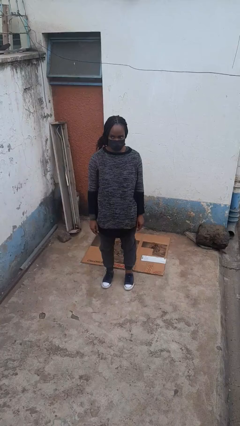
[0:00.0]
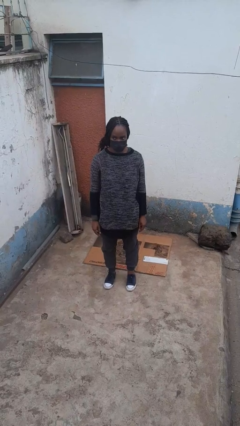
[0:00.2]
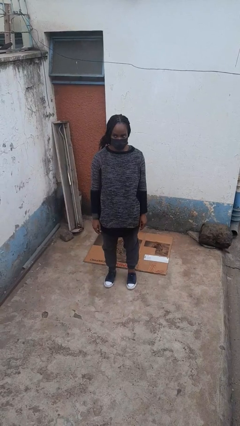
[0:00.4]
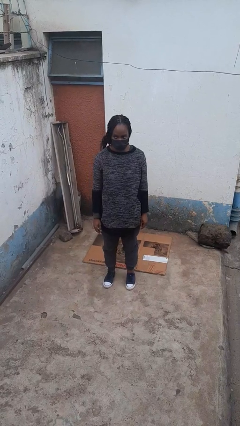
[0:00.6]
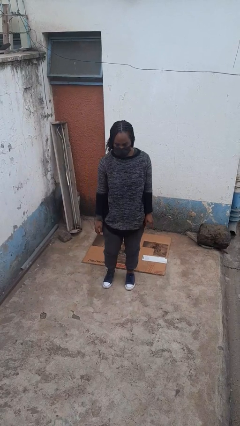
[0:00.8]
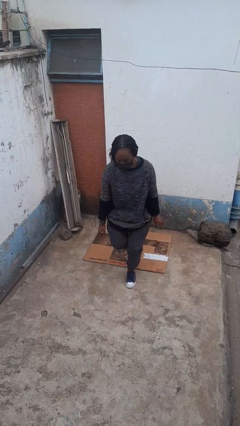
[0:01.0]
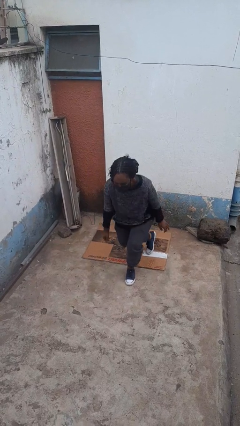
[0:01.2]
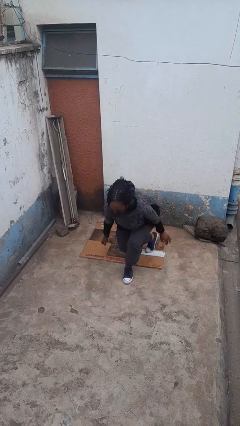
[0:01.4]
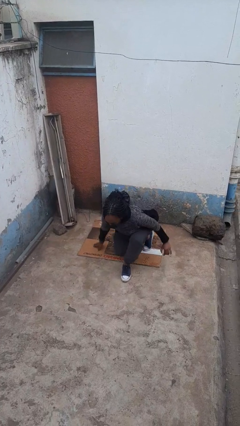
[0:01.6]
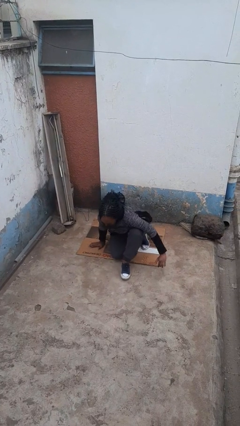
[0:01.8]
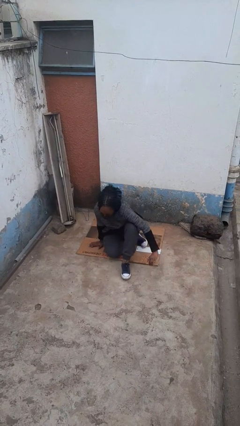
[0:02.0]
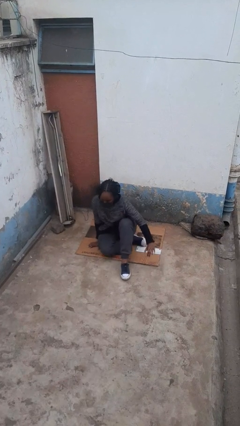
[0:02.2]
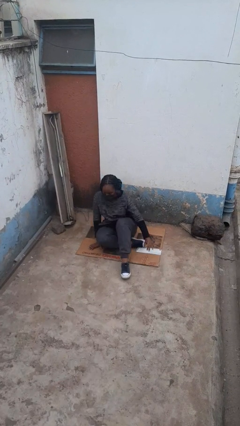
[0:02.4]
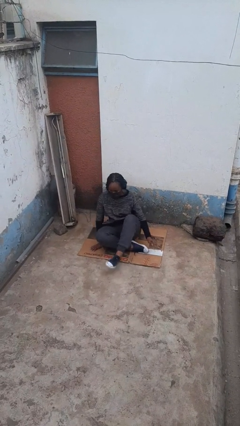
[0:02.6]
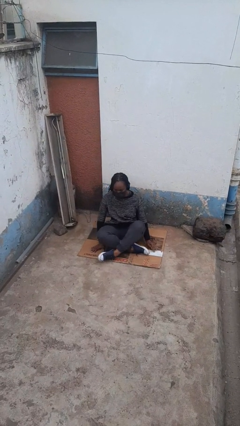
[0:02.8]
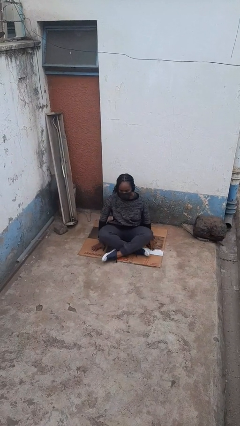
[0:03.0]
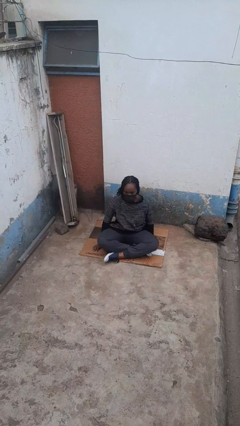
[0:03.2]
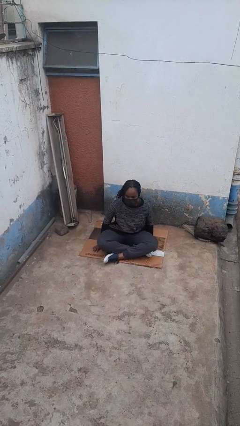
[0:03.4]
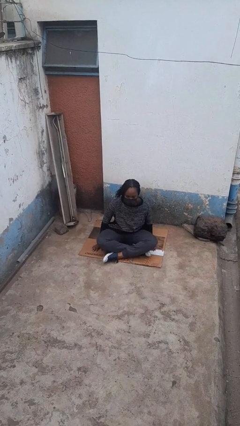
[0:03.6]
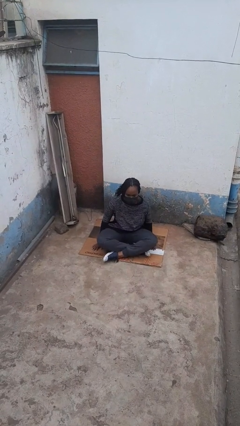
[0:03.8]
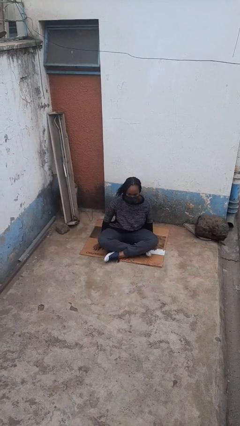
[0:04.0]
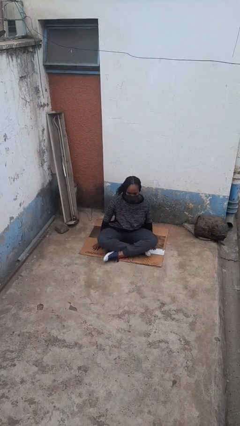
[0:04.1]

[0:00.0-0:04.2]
person sits crisscross

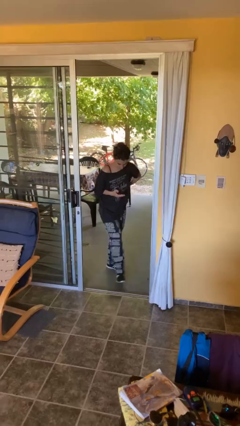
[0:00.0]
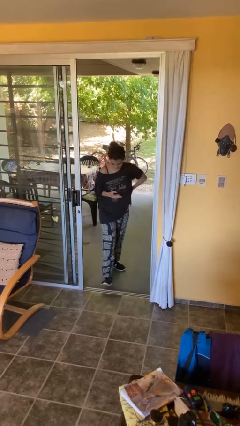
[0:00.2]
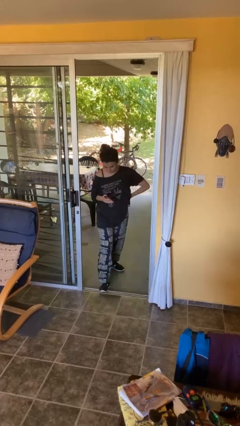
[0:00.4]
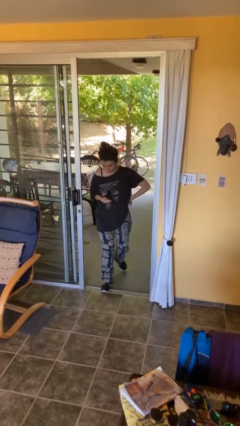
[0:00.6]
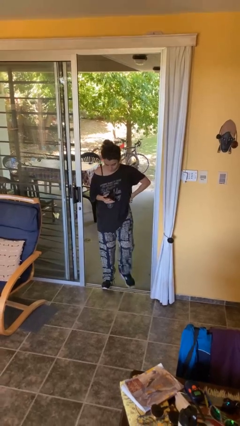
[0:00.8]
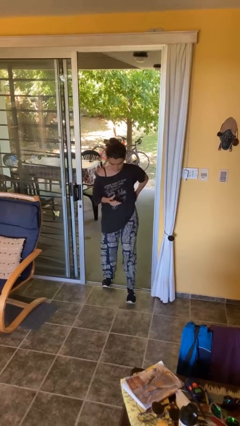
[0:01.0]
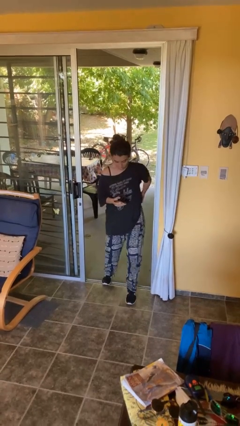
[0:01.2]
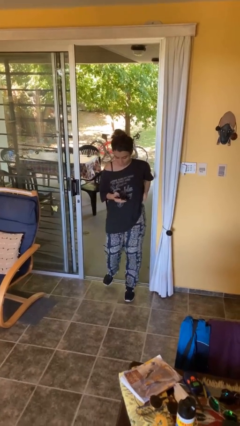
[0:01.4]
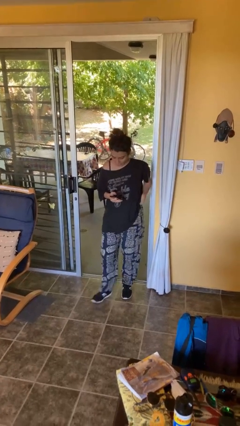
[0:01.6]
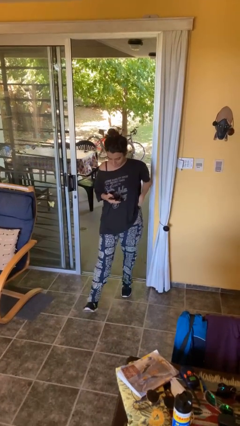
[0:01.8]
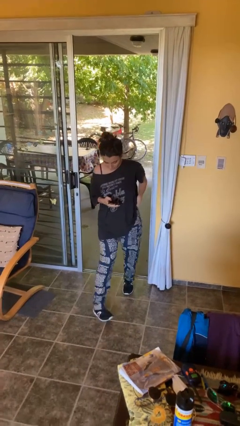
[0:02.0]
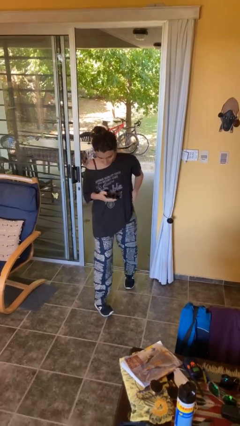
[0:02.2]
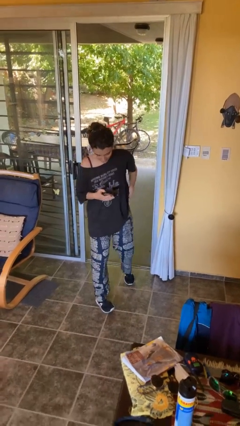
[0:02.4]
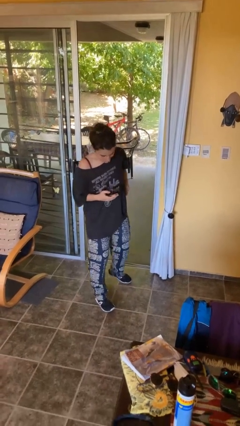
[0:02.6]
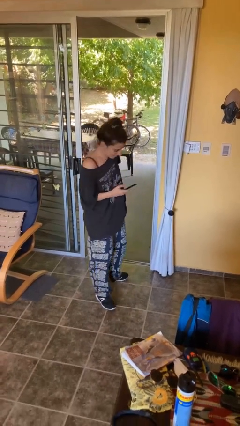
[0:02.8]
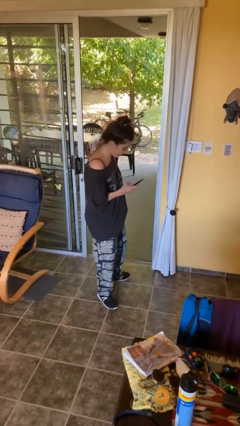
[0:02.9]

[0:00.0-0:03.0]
person enters scene through structure

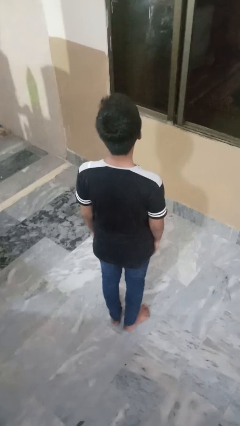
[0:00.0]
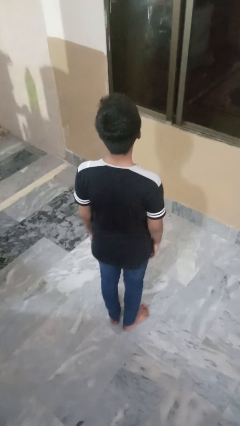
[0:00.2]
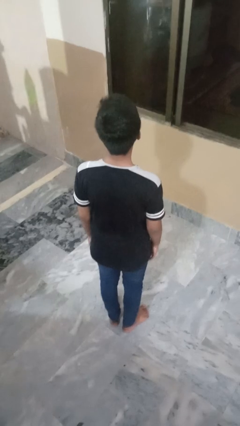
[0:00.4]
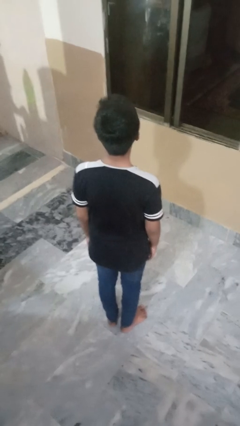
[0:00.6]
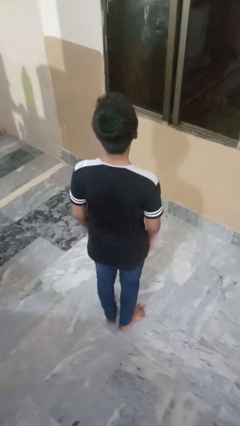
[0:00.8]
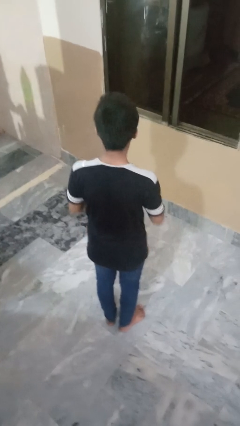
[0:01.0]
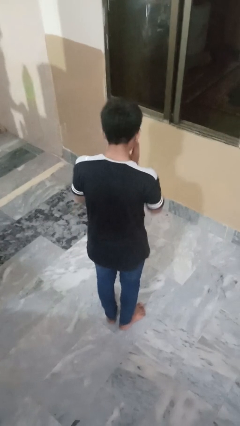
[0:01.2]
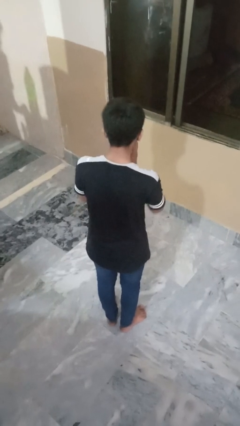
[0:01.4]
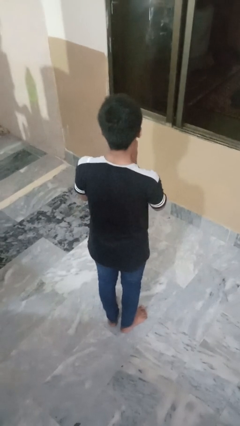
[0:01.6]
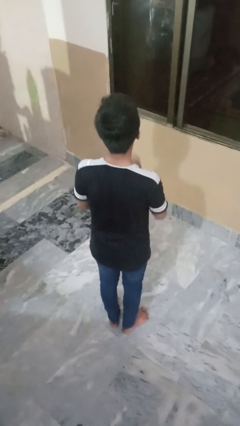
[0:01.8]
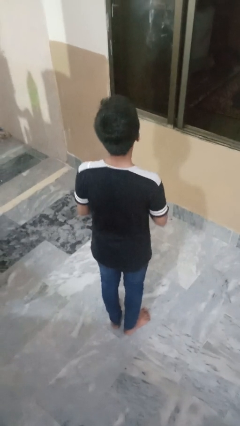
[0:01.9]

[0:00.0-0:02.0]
person sneezes into hand

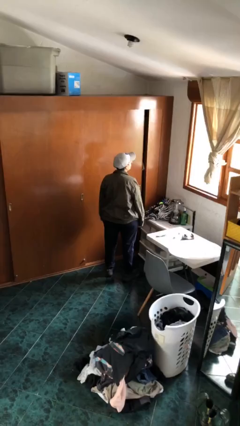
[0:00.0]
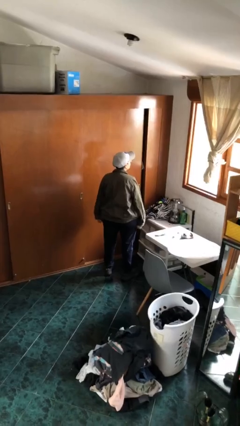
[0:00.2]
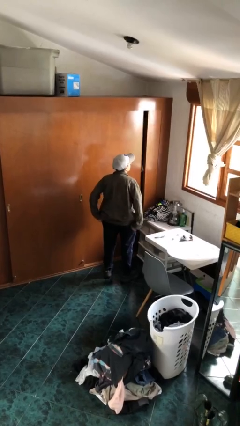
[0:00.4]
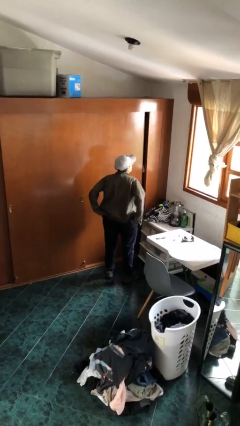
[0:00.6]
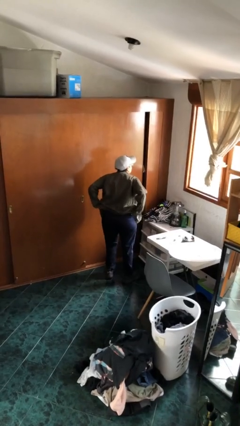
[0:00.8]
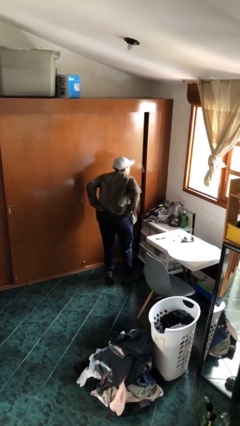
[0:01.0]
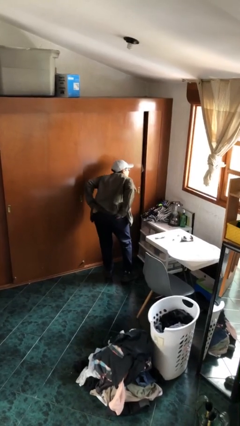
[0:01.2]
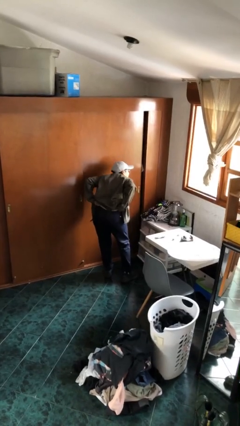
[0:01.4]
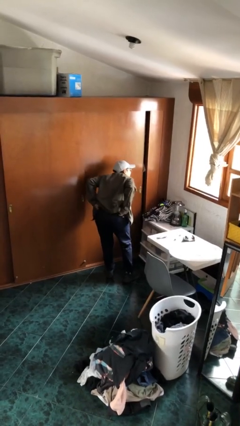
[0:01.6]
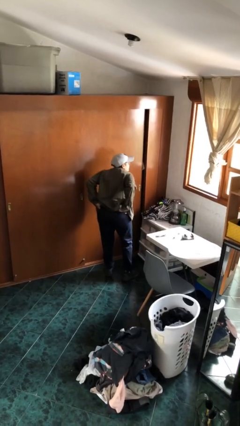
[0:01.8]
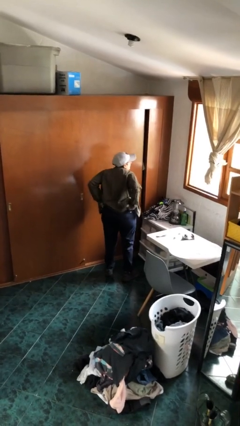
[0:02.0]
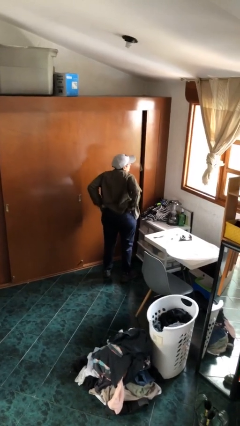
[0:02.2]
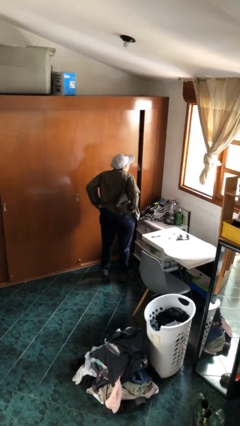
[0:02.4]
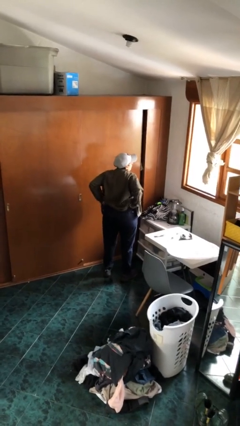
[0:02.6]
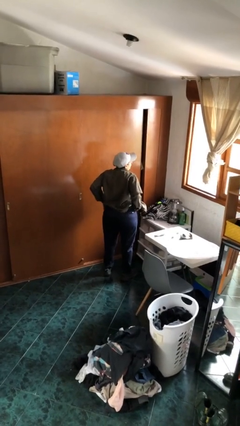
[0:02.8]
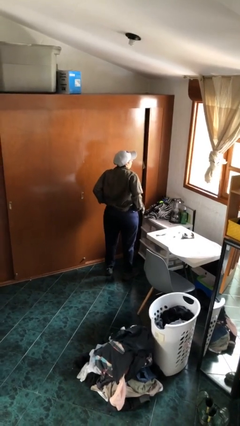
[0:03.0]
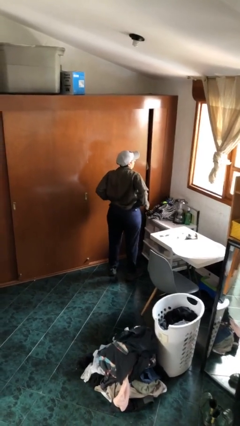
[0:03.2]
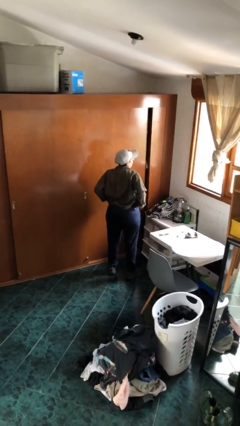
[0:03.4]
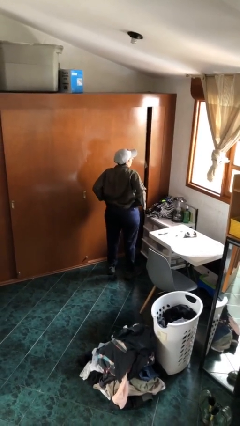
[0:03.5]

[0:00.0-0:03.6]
person hikes up pants

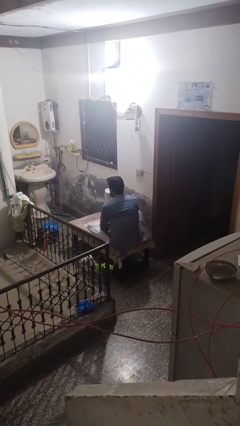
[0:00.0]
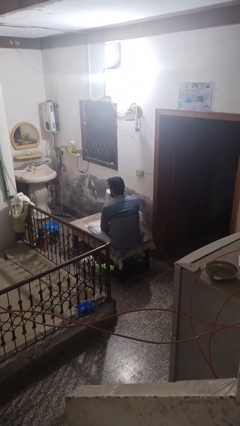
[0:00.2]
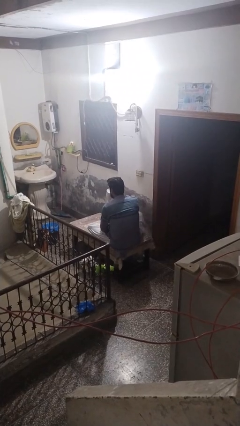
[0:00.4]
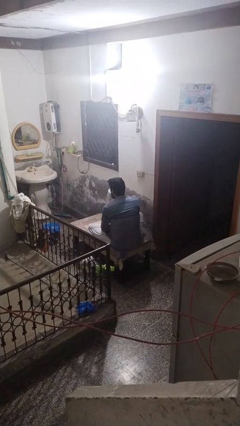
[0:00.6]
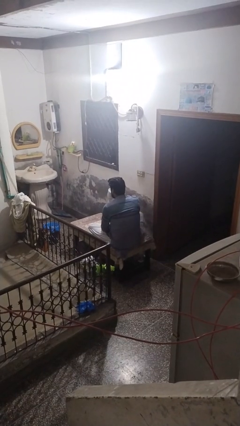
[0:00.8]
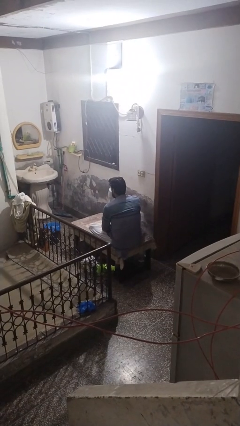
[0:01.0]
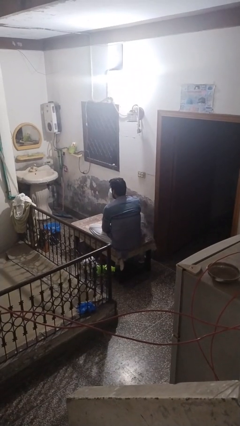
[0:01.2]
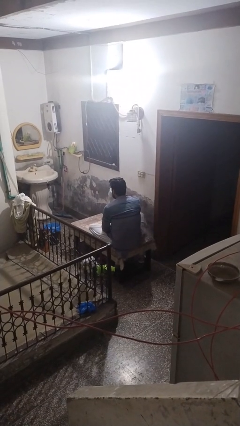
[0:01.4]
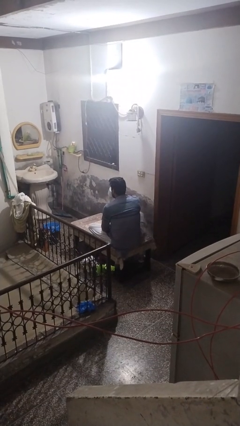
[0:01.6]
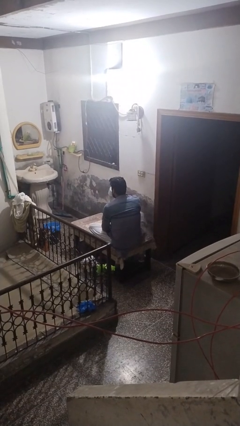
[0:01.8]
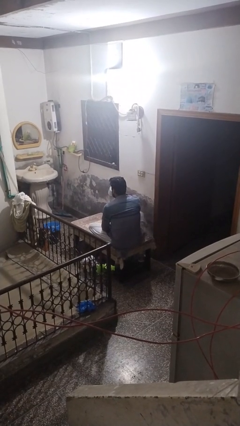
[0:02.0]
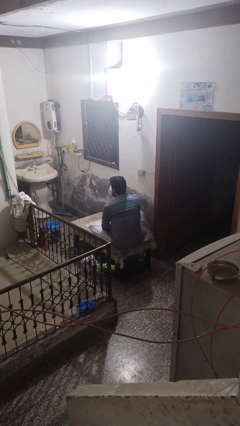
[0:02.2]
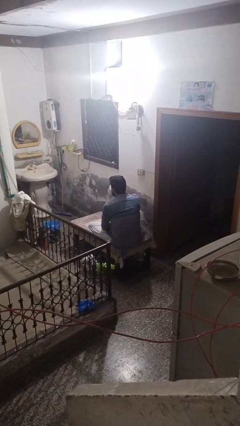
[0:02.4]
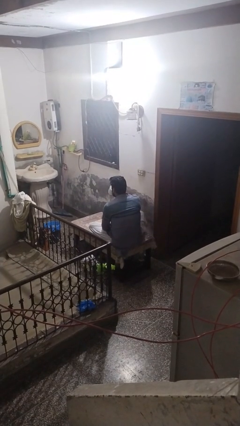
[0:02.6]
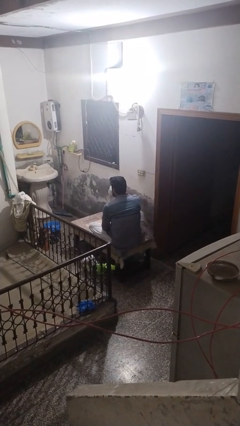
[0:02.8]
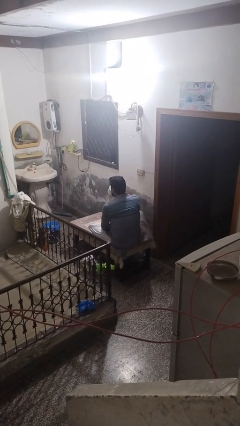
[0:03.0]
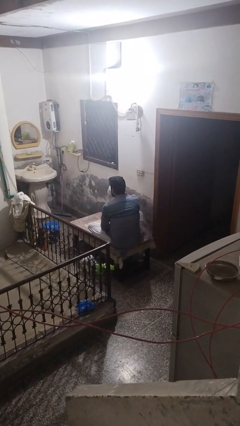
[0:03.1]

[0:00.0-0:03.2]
person drinks from mug

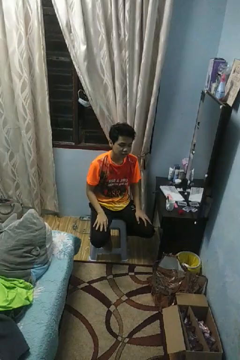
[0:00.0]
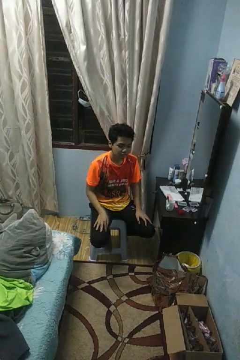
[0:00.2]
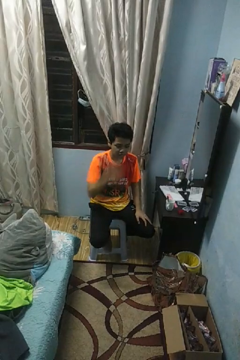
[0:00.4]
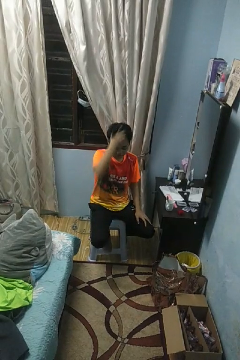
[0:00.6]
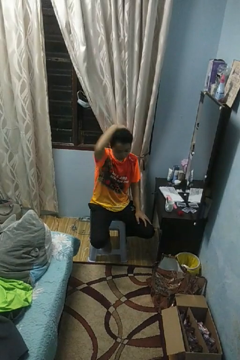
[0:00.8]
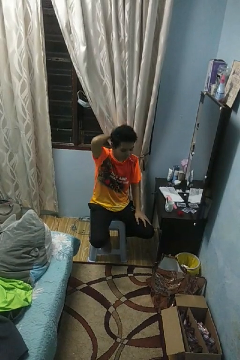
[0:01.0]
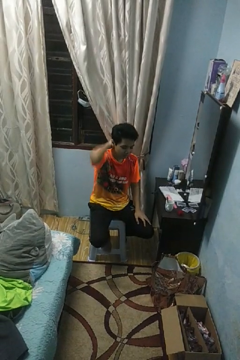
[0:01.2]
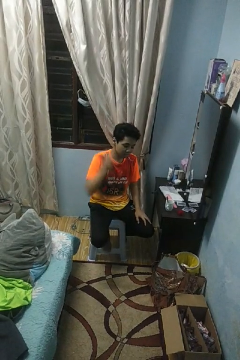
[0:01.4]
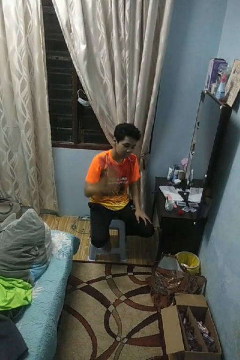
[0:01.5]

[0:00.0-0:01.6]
person strokes hair
